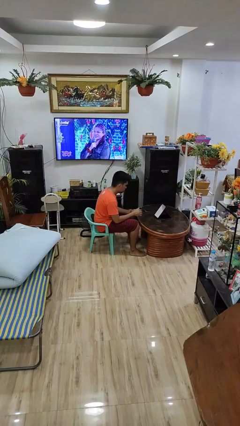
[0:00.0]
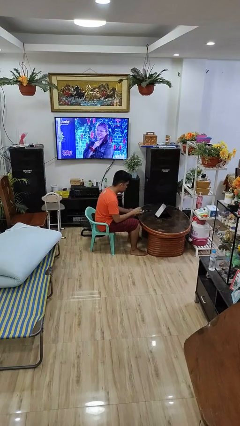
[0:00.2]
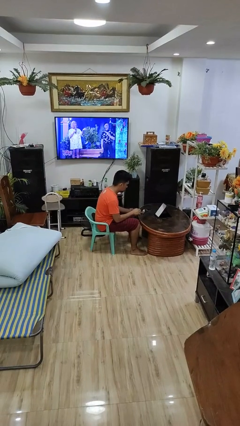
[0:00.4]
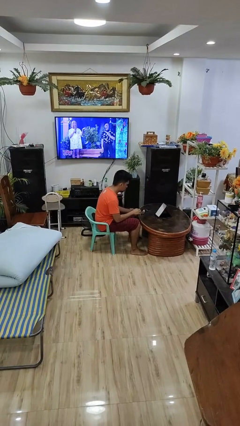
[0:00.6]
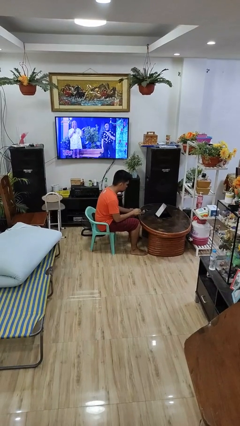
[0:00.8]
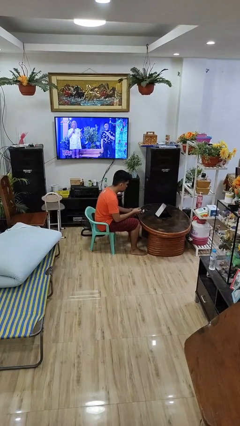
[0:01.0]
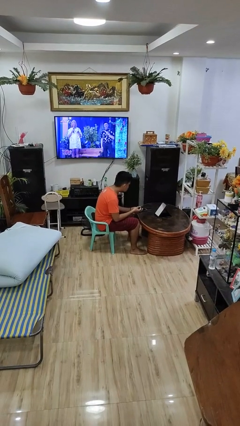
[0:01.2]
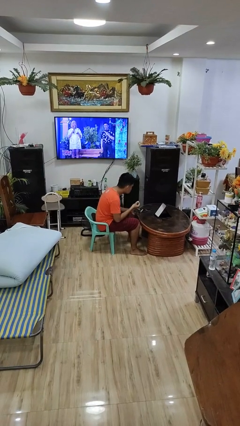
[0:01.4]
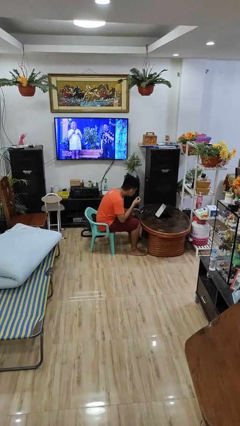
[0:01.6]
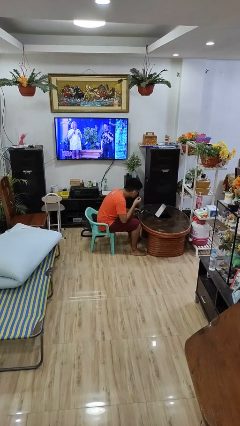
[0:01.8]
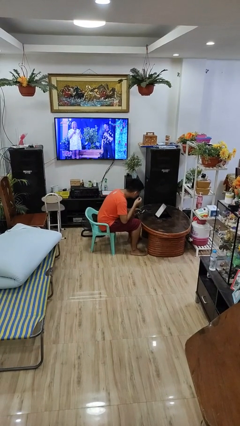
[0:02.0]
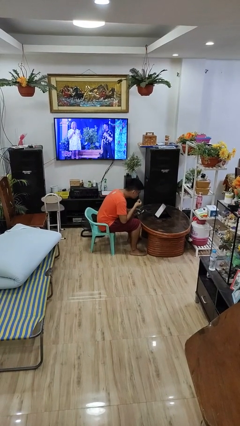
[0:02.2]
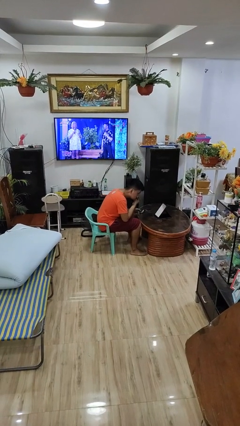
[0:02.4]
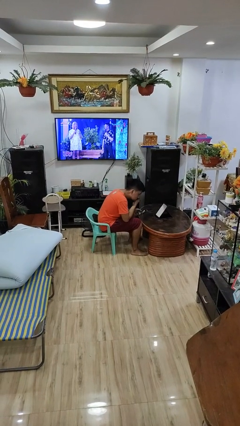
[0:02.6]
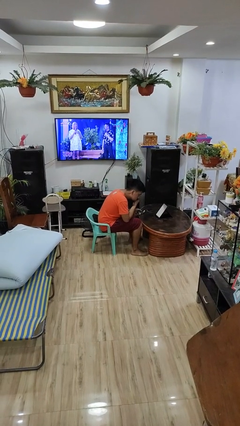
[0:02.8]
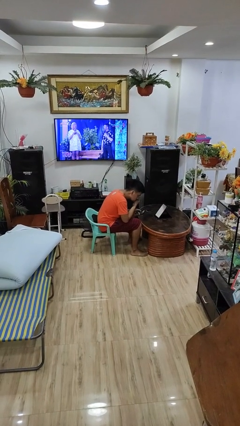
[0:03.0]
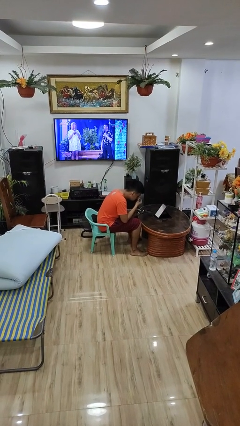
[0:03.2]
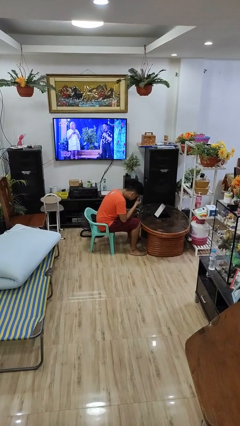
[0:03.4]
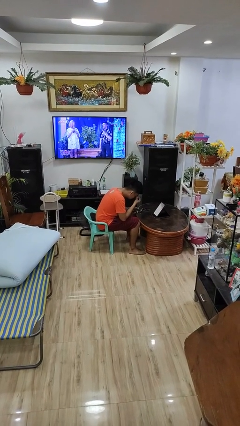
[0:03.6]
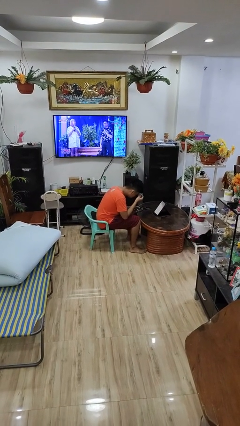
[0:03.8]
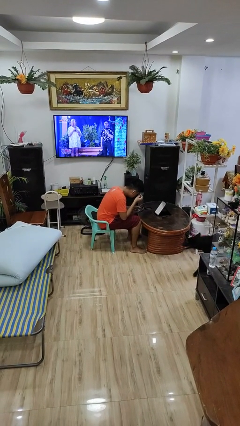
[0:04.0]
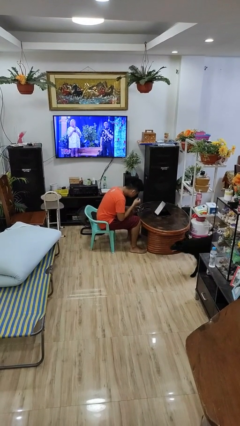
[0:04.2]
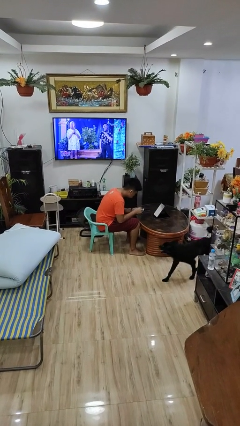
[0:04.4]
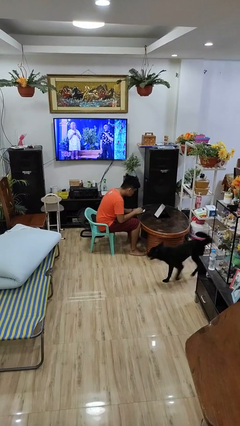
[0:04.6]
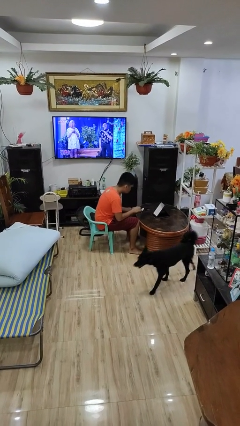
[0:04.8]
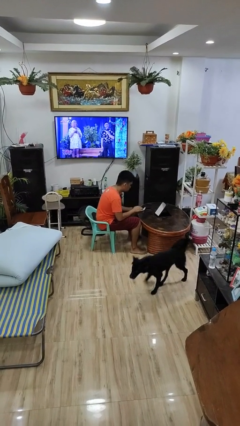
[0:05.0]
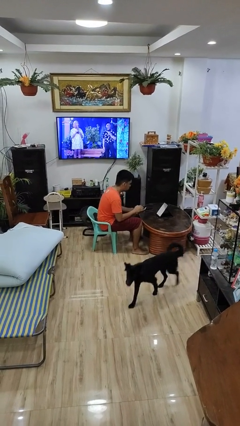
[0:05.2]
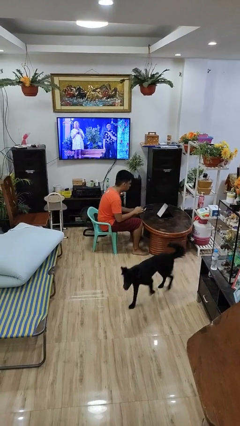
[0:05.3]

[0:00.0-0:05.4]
person applies foundation makeup

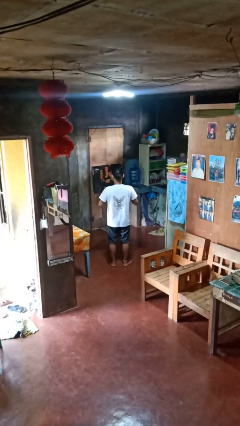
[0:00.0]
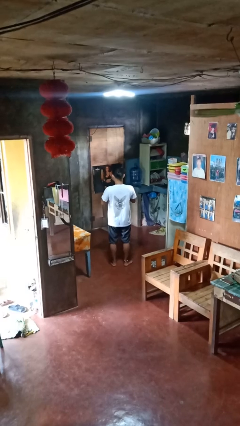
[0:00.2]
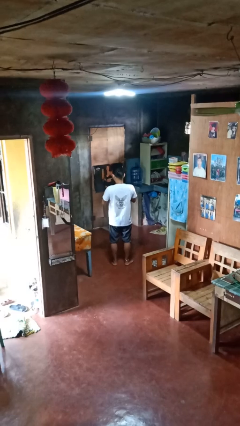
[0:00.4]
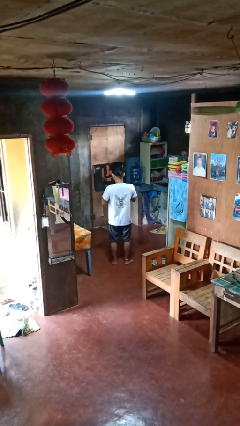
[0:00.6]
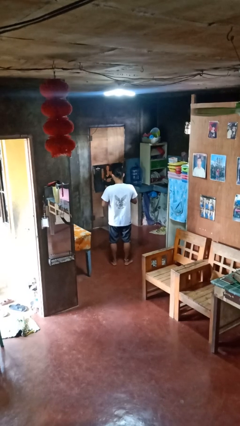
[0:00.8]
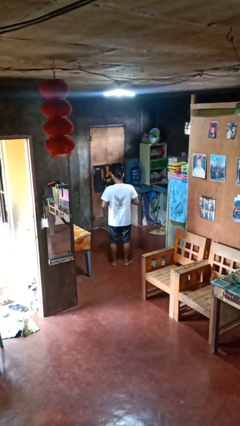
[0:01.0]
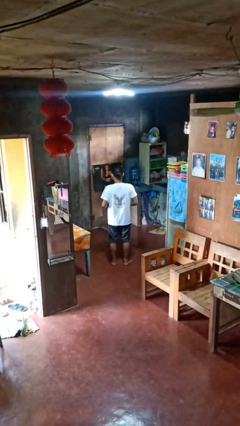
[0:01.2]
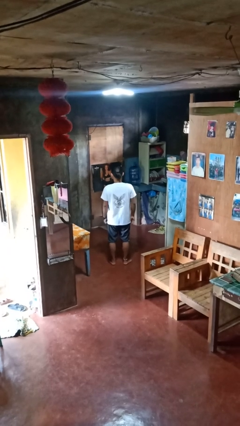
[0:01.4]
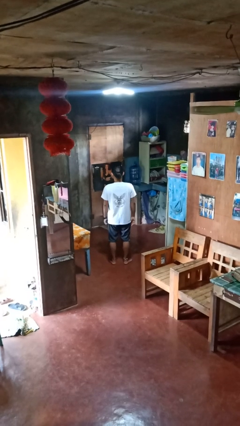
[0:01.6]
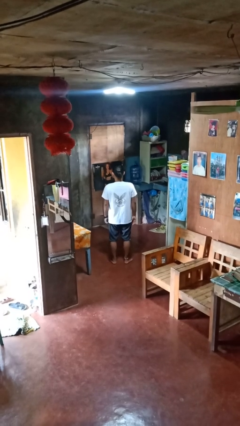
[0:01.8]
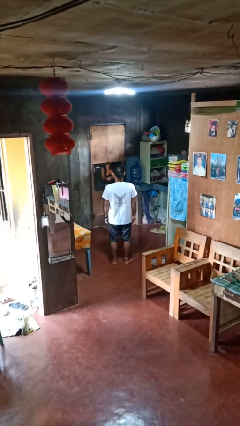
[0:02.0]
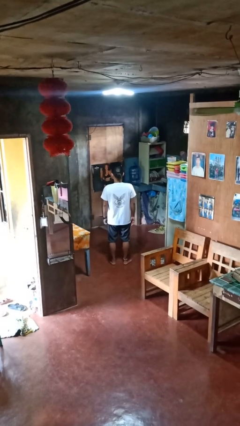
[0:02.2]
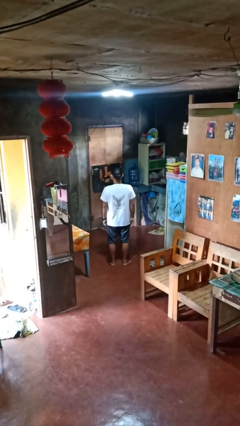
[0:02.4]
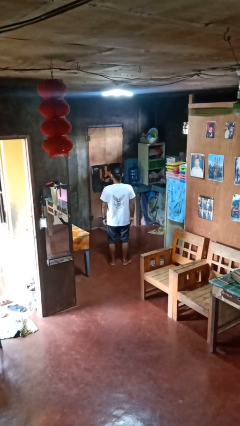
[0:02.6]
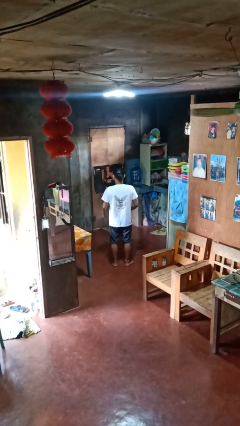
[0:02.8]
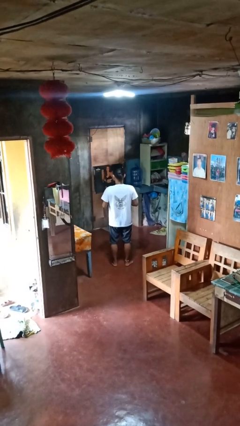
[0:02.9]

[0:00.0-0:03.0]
person unbuttons shirt

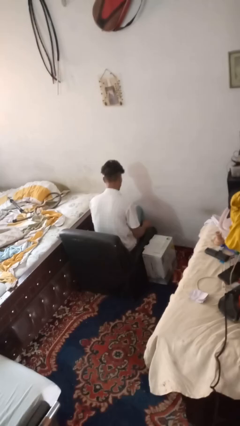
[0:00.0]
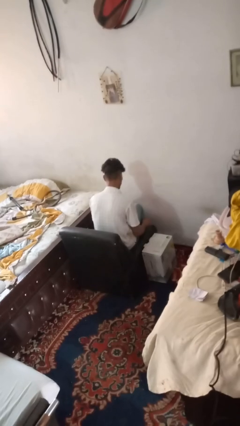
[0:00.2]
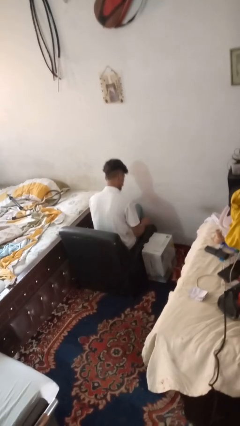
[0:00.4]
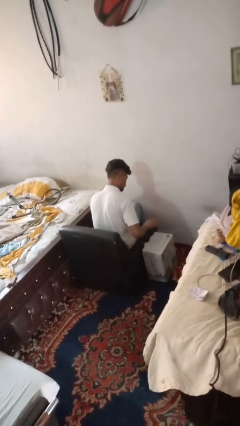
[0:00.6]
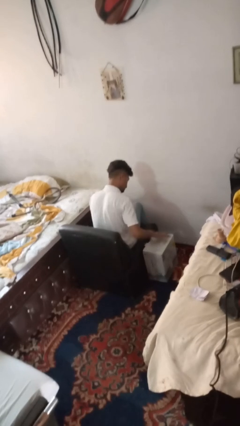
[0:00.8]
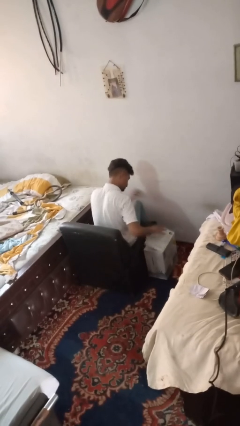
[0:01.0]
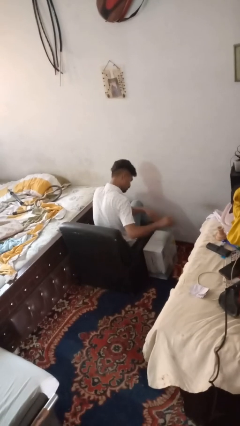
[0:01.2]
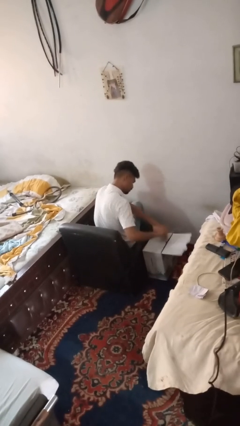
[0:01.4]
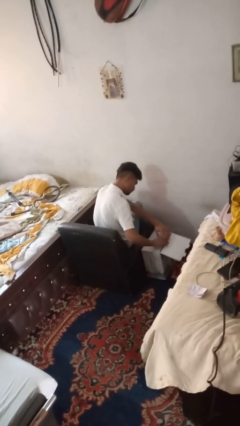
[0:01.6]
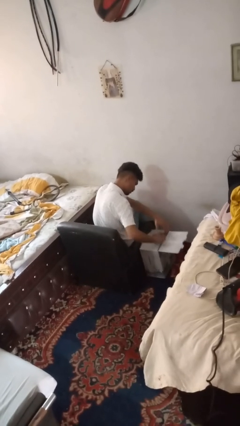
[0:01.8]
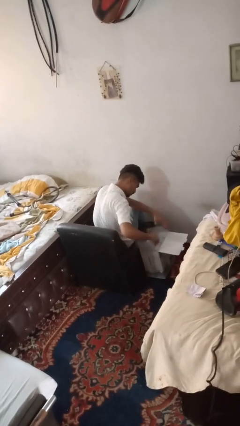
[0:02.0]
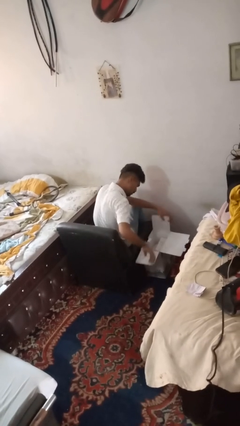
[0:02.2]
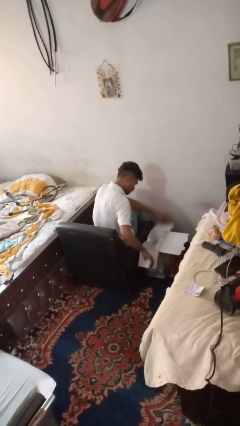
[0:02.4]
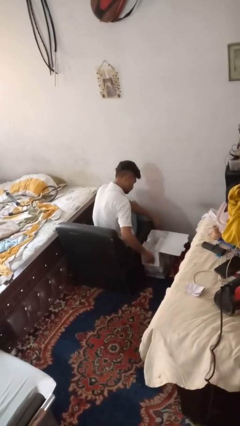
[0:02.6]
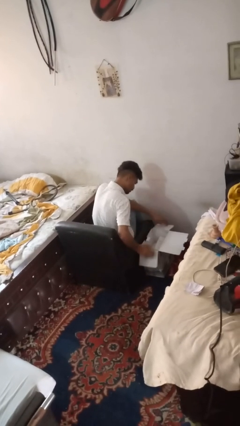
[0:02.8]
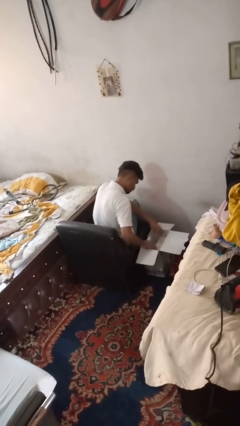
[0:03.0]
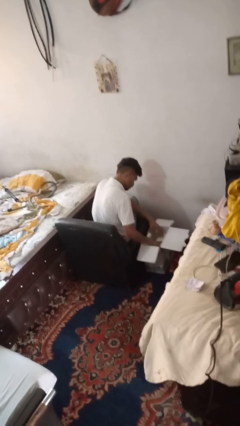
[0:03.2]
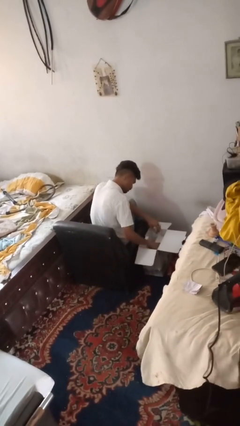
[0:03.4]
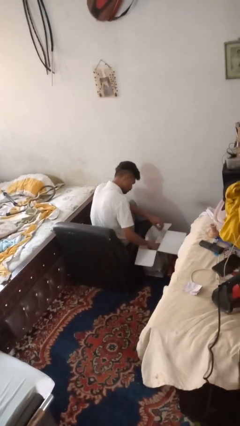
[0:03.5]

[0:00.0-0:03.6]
person searches in box

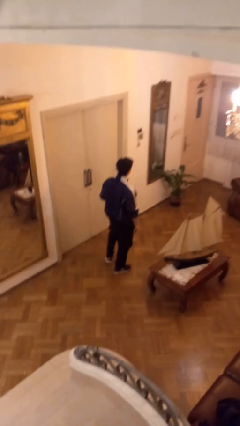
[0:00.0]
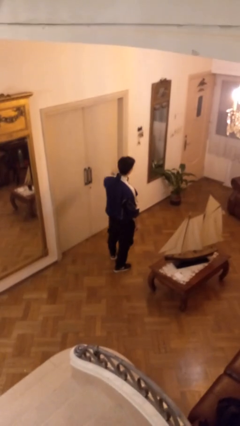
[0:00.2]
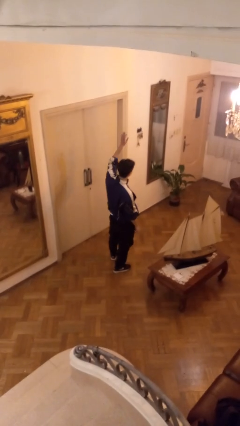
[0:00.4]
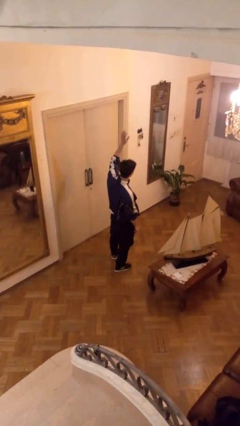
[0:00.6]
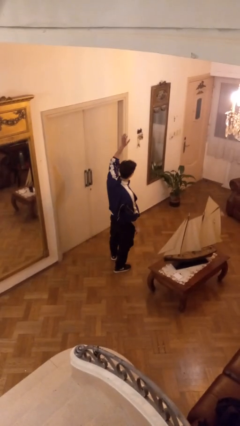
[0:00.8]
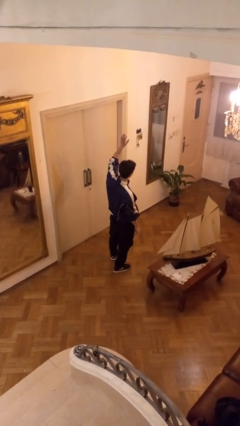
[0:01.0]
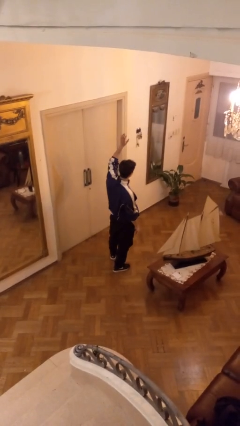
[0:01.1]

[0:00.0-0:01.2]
person gestures raise hand

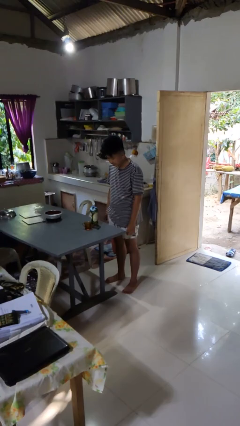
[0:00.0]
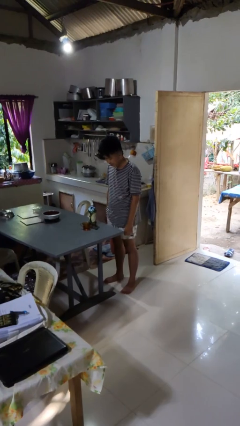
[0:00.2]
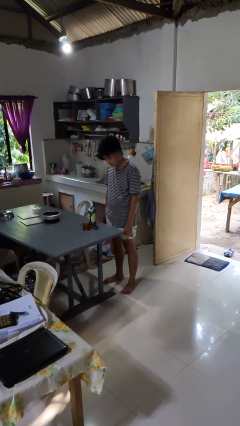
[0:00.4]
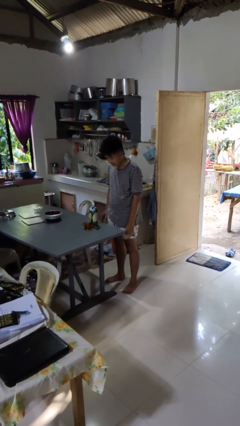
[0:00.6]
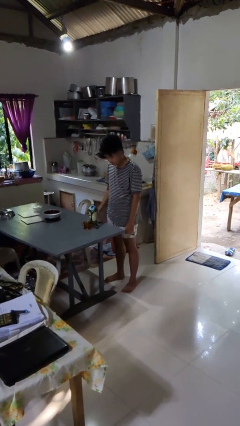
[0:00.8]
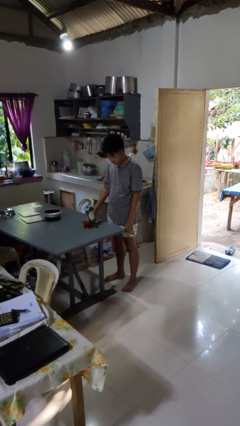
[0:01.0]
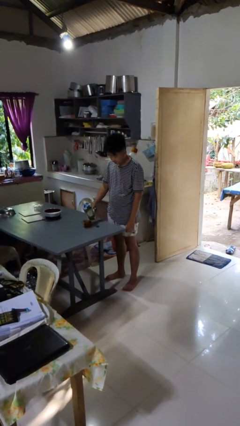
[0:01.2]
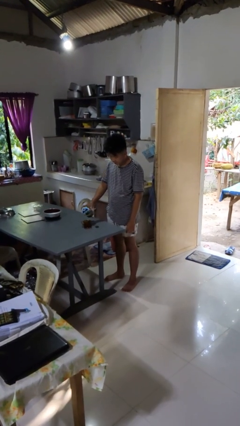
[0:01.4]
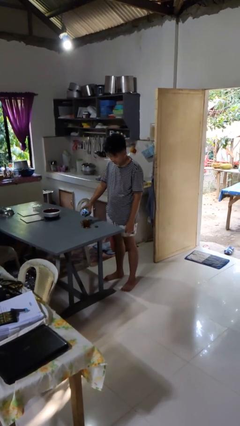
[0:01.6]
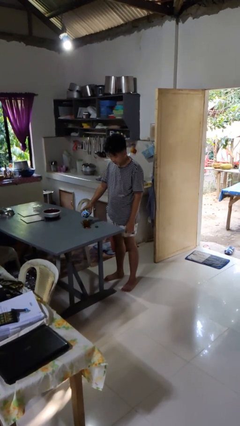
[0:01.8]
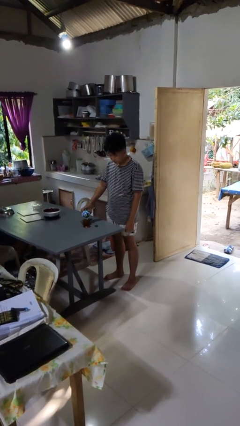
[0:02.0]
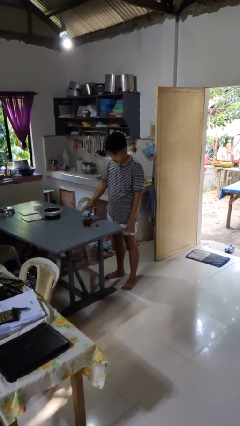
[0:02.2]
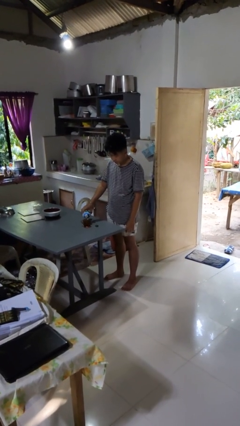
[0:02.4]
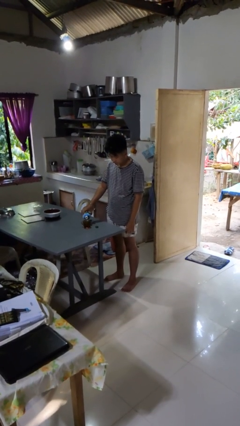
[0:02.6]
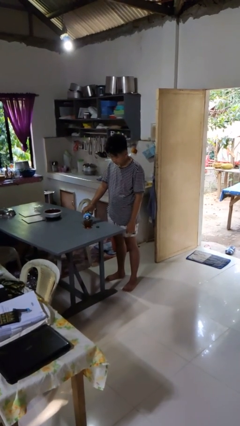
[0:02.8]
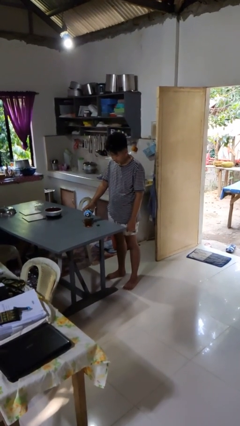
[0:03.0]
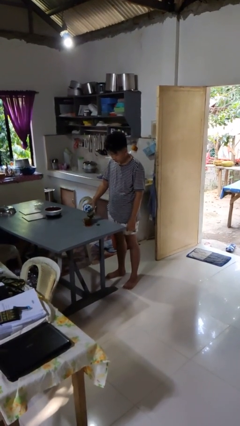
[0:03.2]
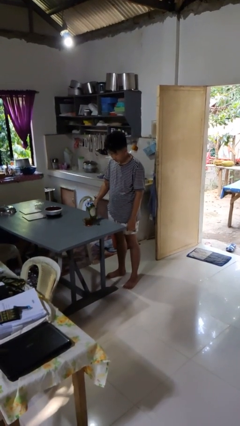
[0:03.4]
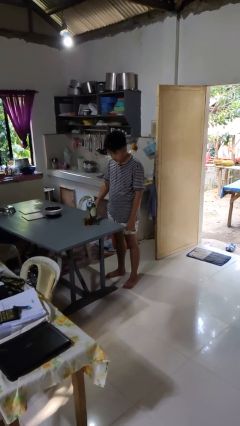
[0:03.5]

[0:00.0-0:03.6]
person pours liquid into cup

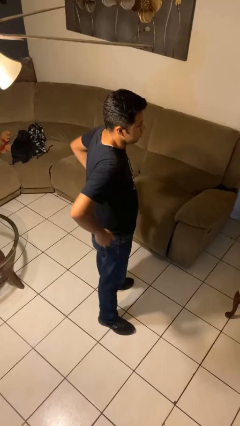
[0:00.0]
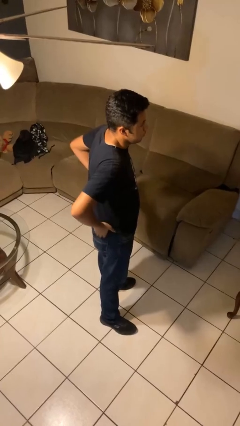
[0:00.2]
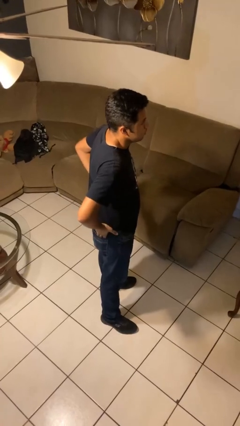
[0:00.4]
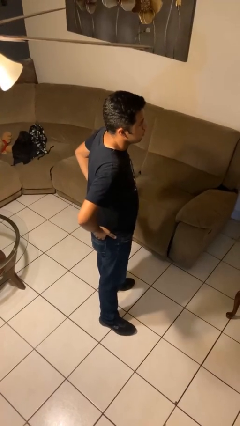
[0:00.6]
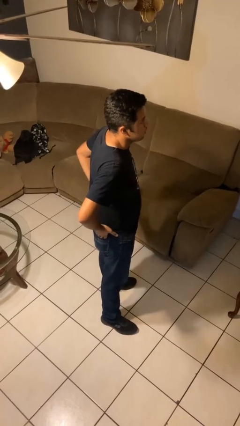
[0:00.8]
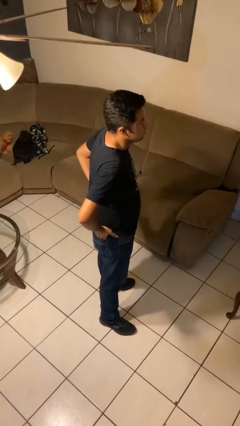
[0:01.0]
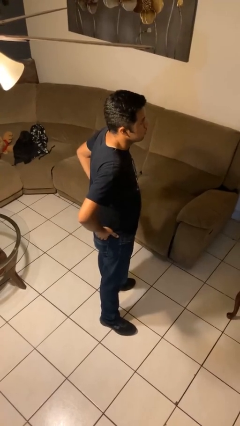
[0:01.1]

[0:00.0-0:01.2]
person puts hands in back pockets
